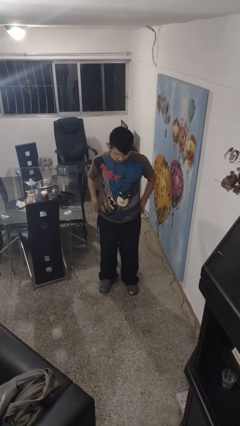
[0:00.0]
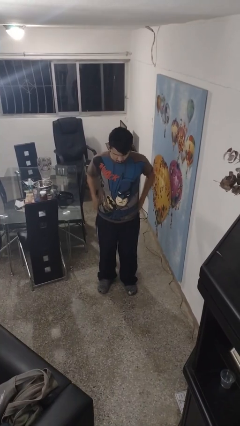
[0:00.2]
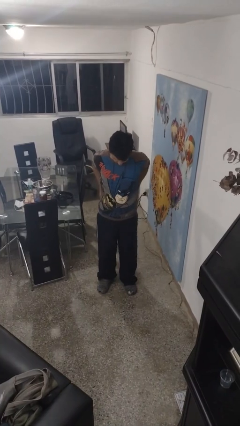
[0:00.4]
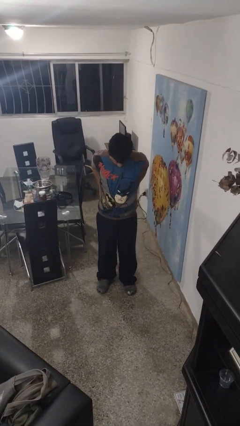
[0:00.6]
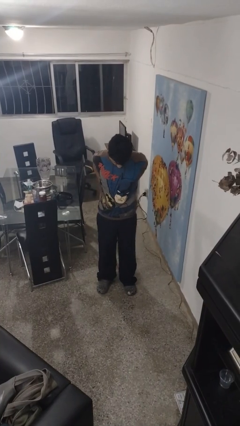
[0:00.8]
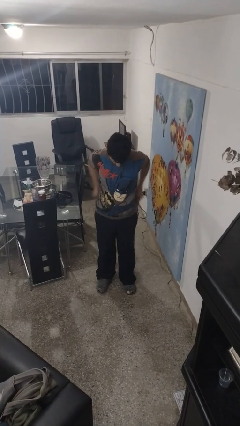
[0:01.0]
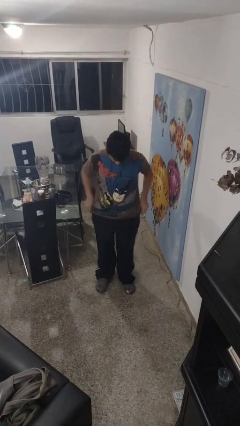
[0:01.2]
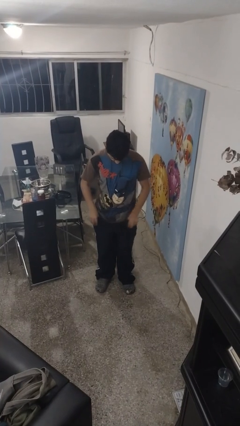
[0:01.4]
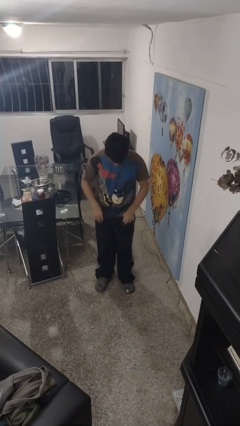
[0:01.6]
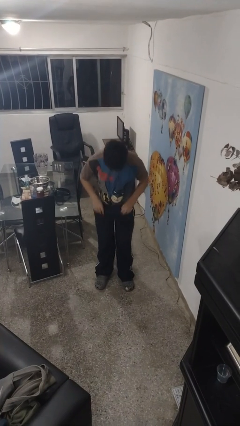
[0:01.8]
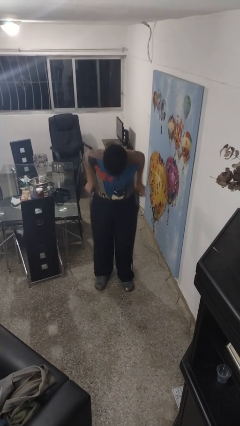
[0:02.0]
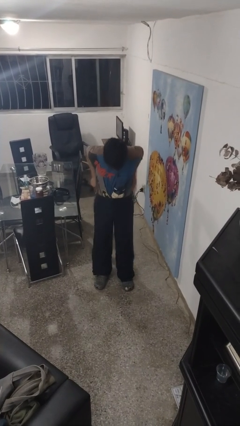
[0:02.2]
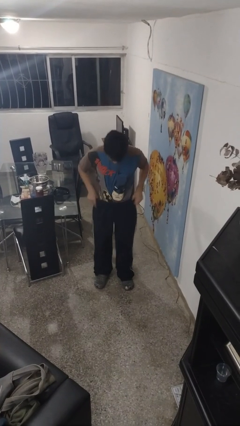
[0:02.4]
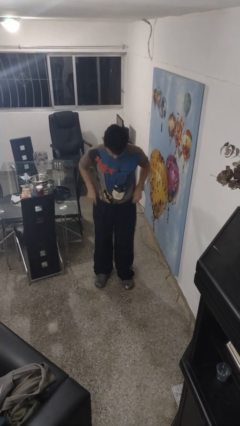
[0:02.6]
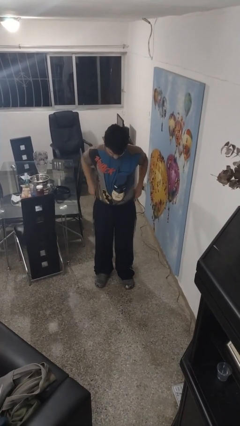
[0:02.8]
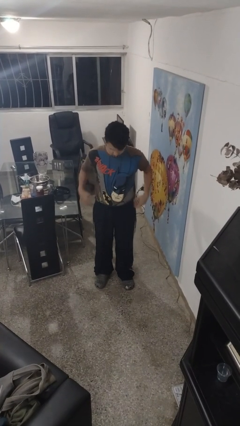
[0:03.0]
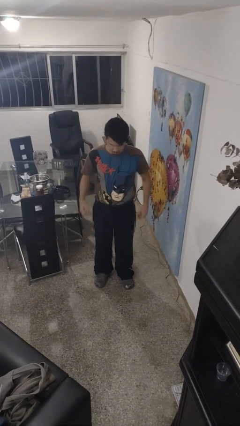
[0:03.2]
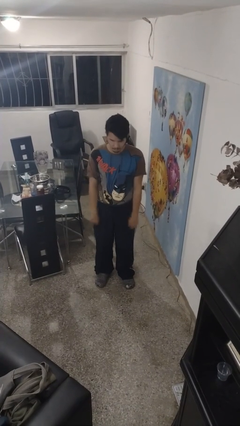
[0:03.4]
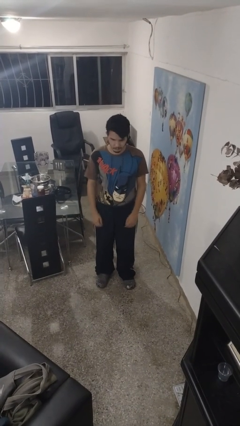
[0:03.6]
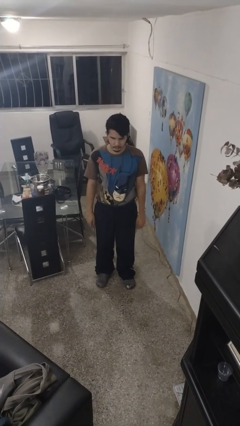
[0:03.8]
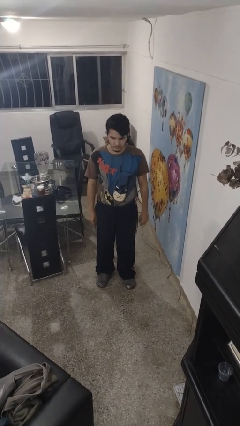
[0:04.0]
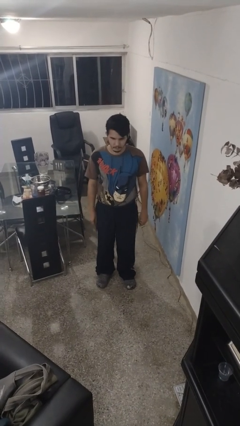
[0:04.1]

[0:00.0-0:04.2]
person tucks in shirt

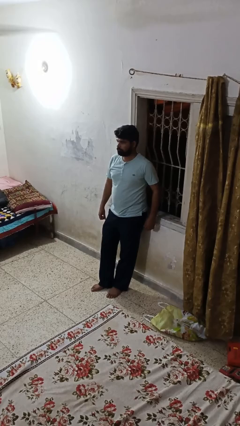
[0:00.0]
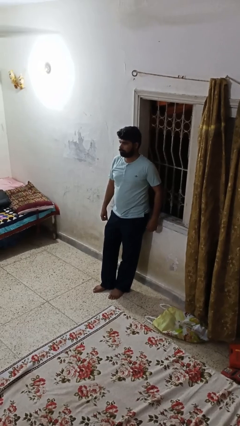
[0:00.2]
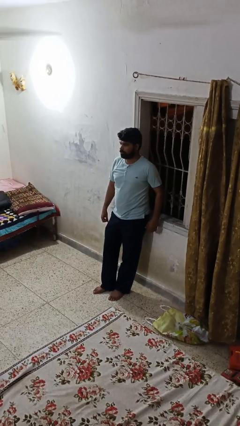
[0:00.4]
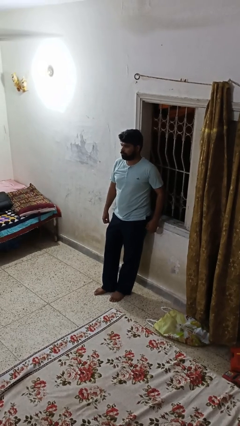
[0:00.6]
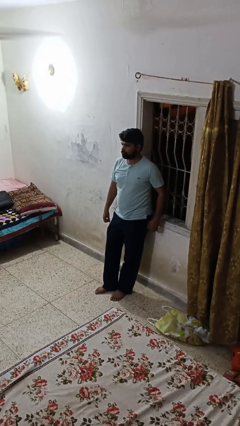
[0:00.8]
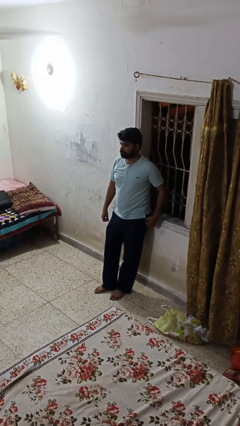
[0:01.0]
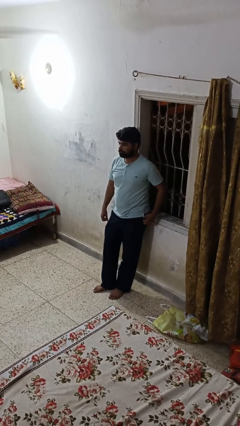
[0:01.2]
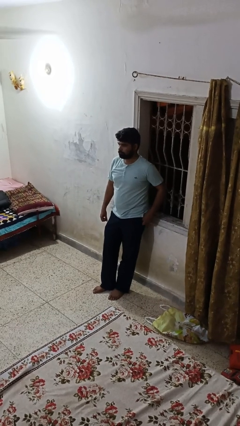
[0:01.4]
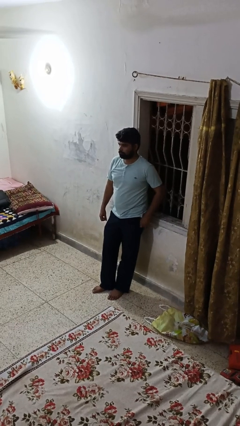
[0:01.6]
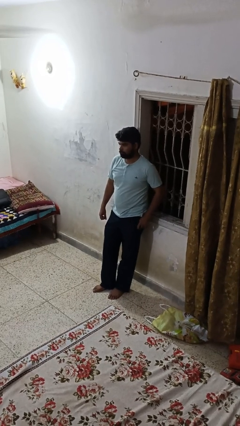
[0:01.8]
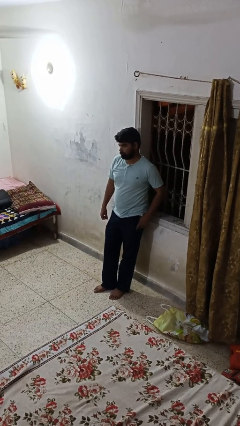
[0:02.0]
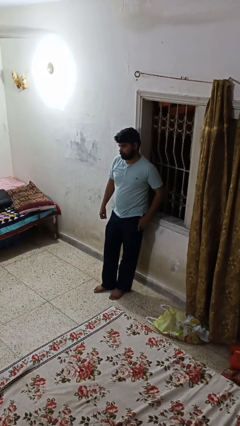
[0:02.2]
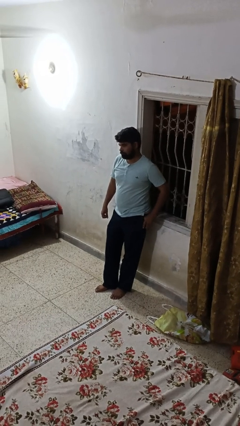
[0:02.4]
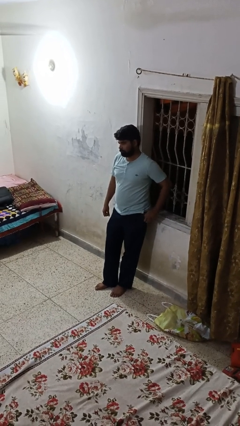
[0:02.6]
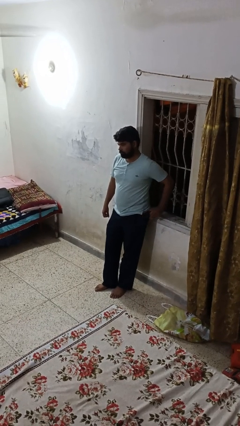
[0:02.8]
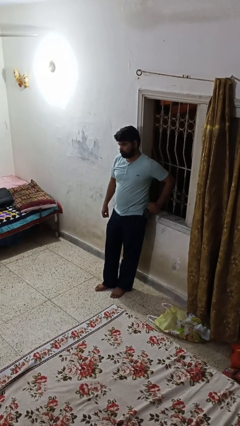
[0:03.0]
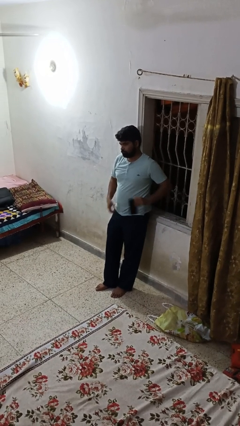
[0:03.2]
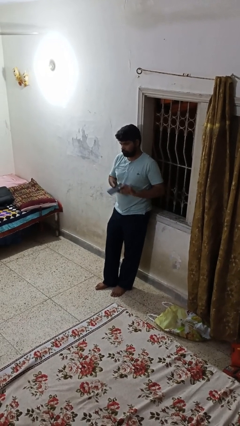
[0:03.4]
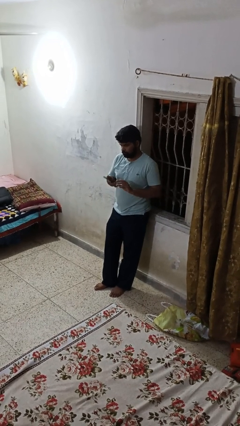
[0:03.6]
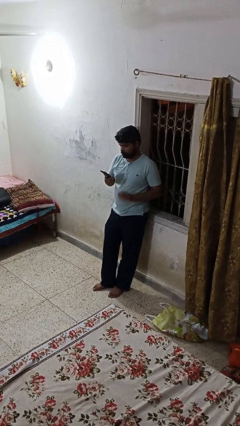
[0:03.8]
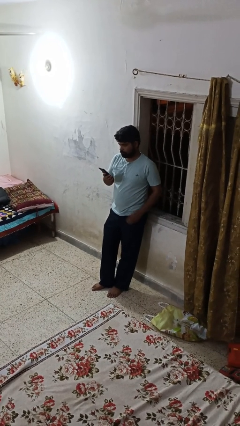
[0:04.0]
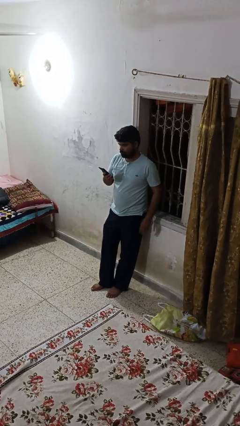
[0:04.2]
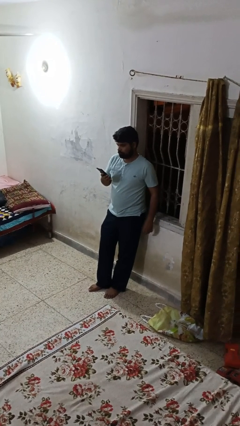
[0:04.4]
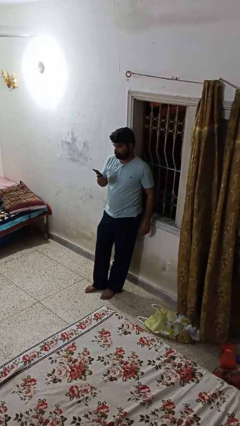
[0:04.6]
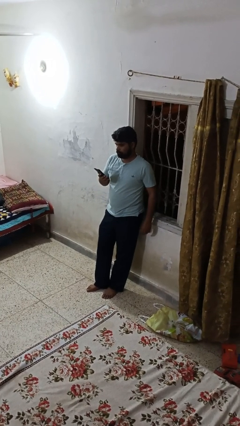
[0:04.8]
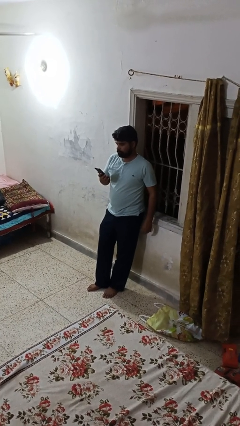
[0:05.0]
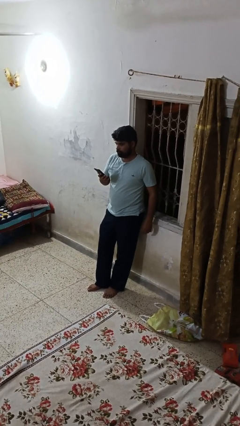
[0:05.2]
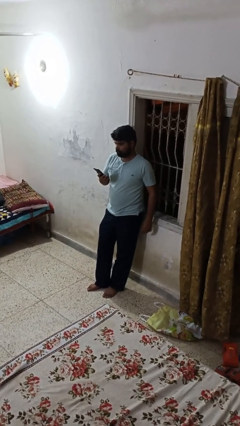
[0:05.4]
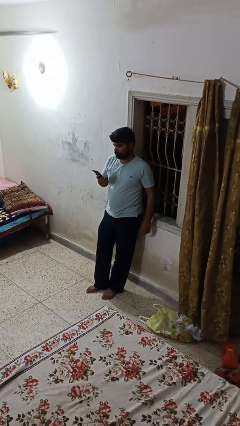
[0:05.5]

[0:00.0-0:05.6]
person takes phone from pocket

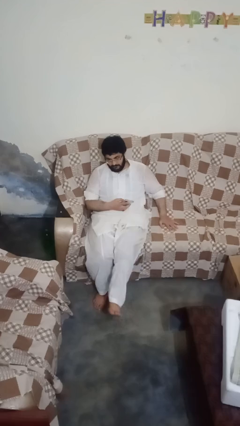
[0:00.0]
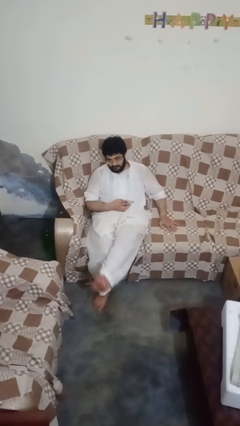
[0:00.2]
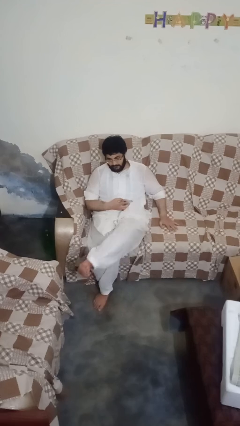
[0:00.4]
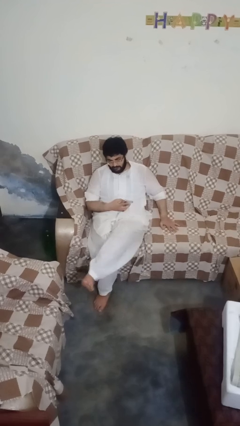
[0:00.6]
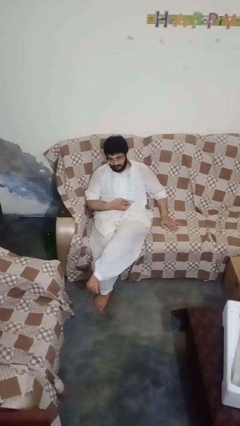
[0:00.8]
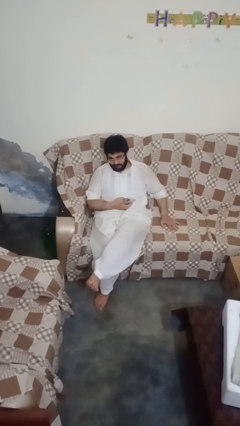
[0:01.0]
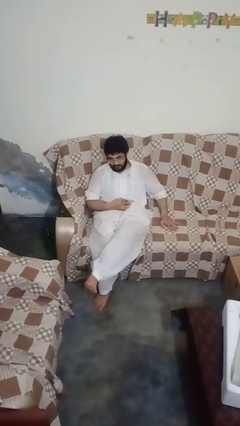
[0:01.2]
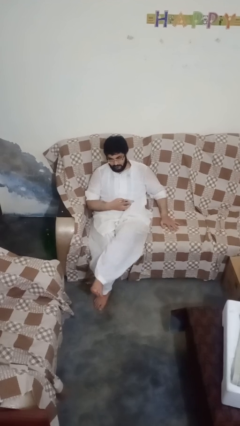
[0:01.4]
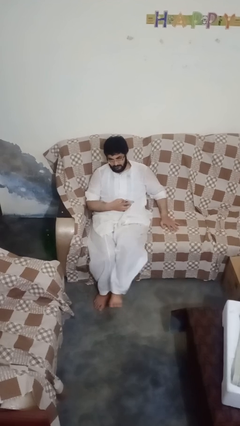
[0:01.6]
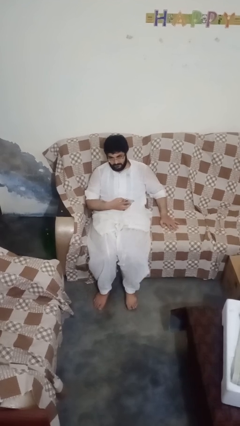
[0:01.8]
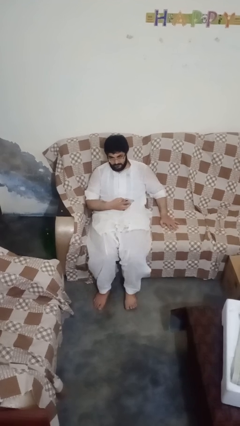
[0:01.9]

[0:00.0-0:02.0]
person crosses legs

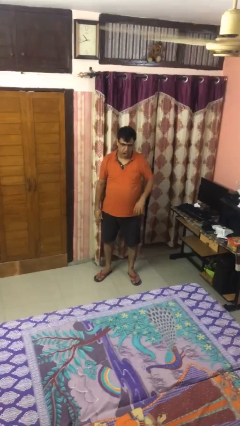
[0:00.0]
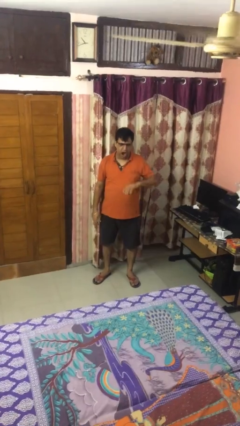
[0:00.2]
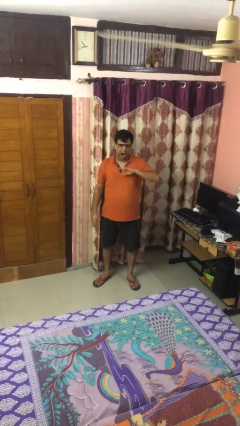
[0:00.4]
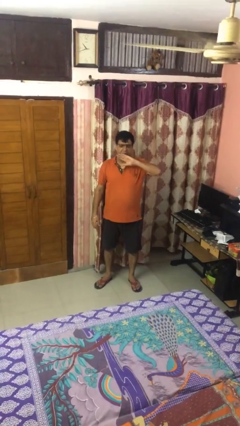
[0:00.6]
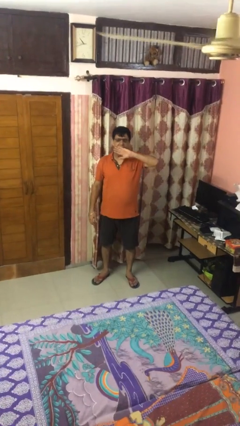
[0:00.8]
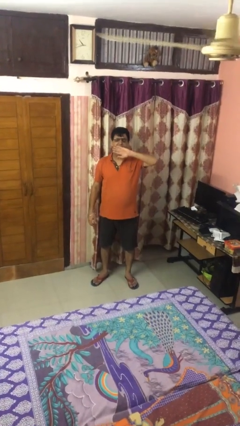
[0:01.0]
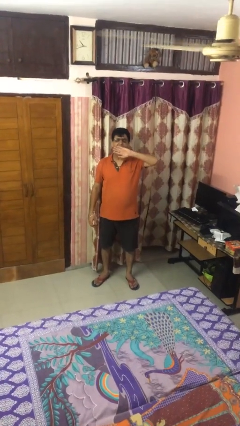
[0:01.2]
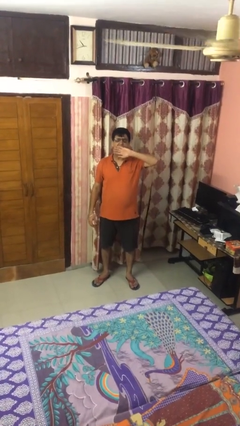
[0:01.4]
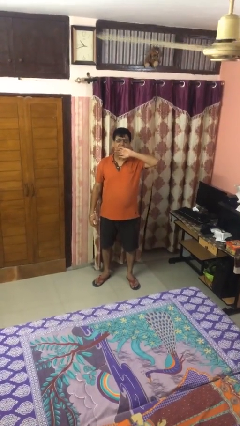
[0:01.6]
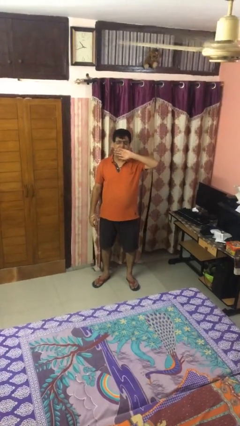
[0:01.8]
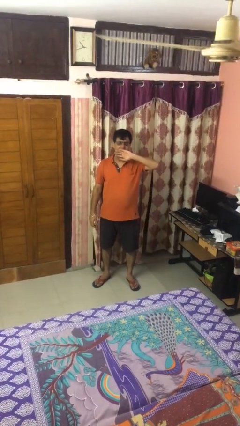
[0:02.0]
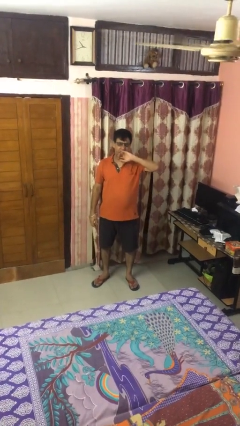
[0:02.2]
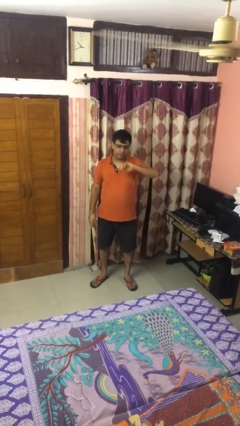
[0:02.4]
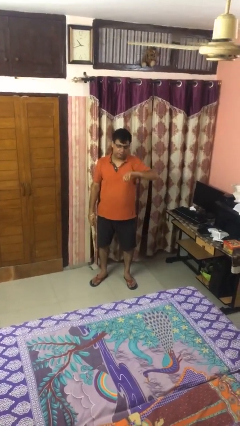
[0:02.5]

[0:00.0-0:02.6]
person yawns

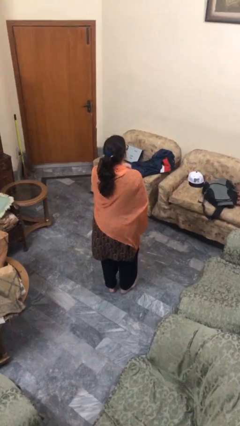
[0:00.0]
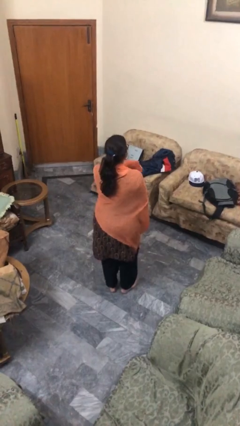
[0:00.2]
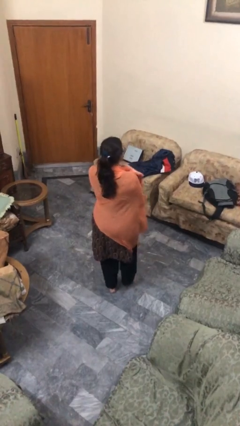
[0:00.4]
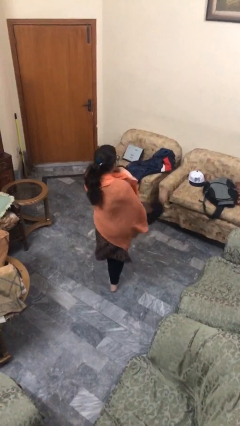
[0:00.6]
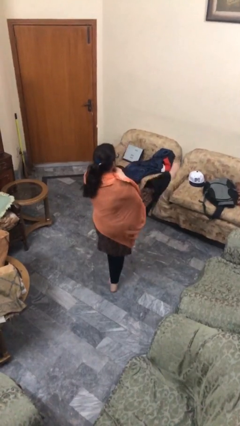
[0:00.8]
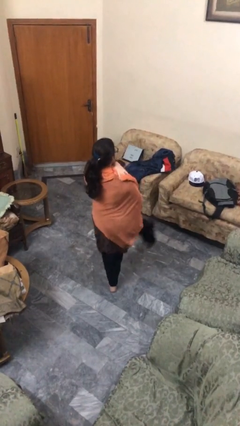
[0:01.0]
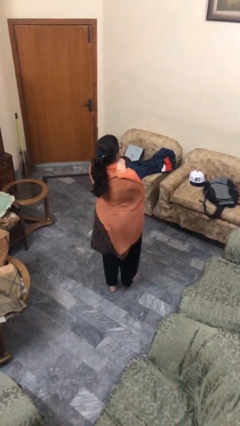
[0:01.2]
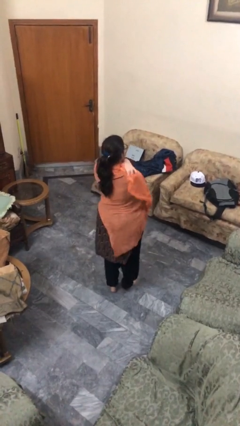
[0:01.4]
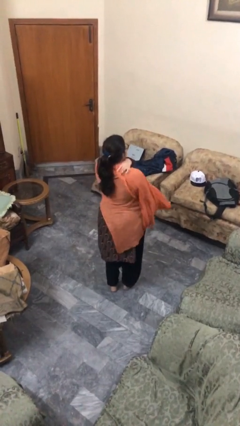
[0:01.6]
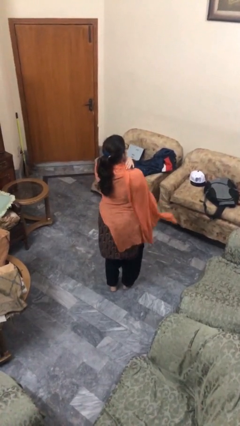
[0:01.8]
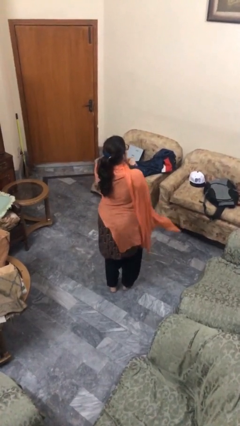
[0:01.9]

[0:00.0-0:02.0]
person karate kicks

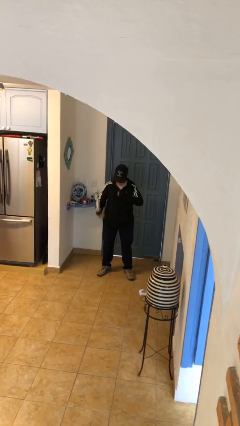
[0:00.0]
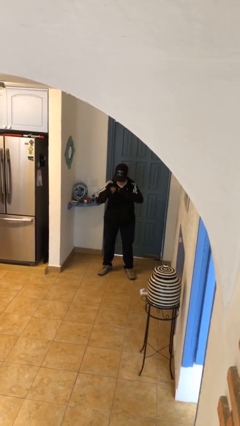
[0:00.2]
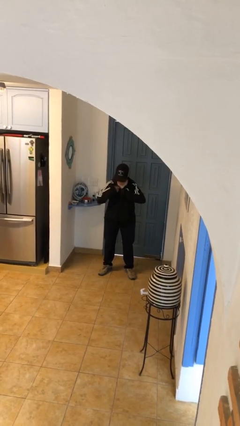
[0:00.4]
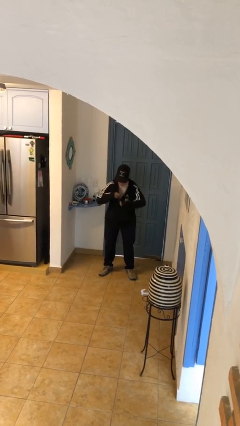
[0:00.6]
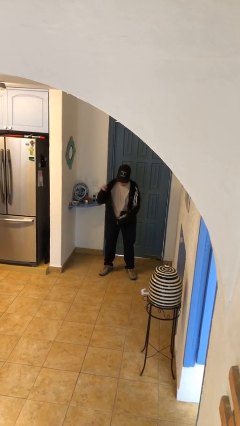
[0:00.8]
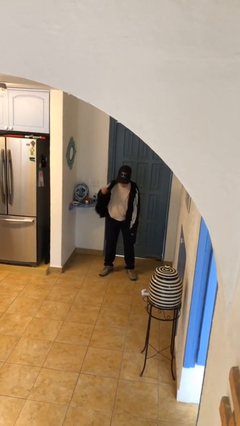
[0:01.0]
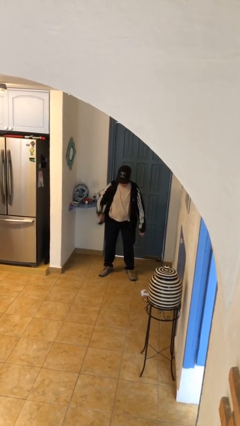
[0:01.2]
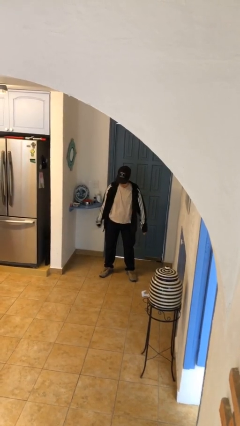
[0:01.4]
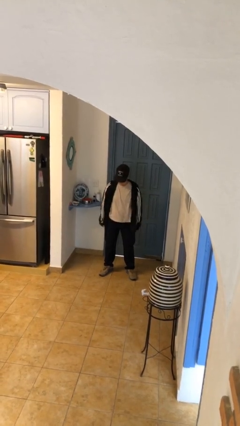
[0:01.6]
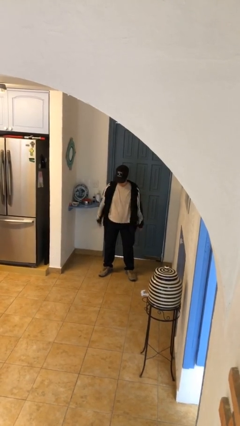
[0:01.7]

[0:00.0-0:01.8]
person unzips jacket
